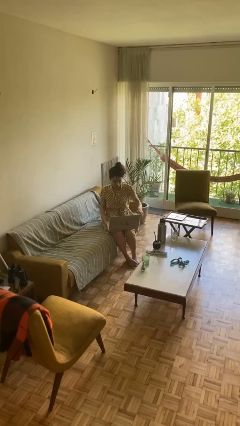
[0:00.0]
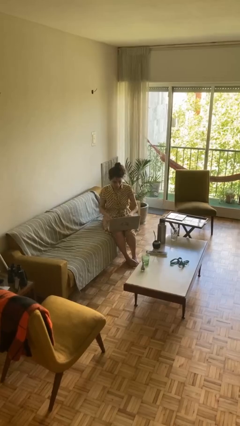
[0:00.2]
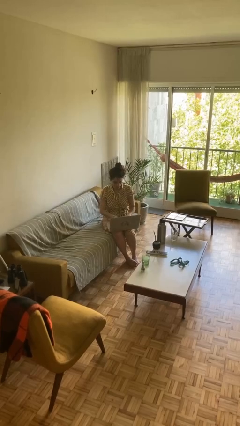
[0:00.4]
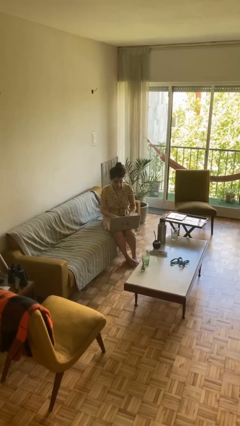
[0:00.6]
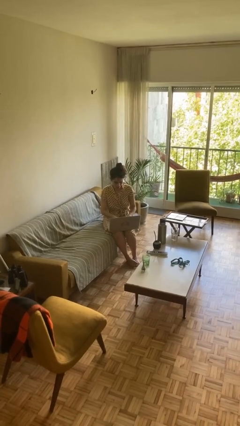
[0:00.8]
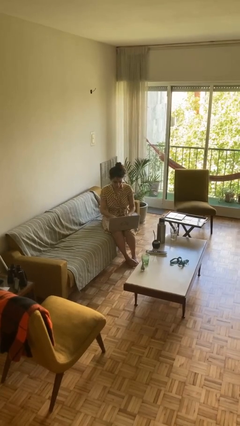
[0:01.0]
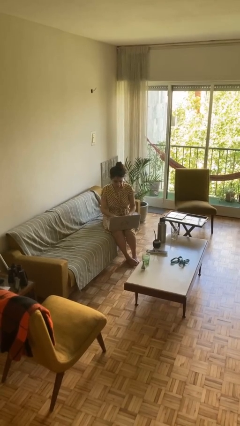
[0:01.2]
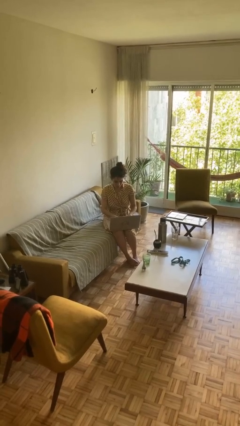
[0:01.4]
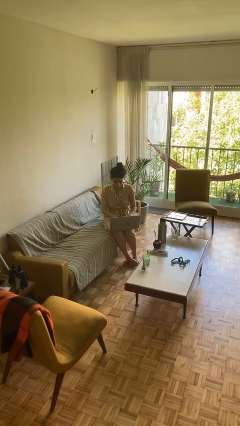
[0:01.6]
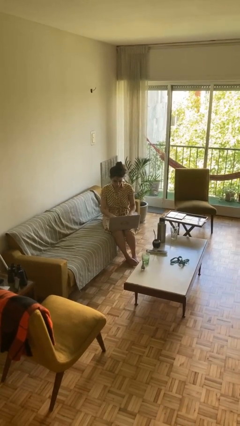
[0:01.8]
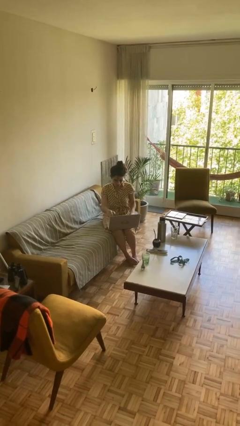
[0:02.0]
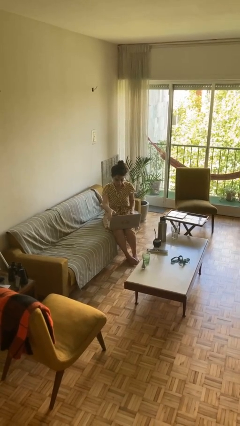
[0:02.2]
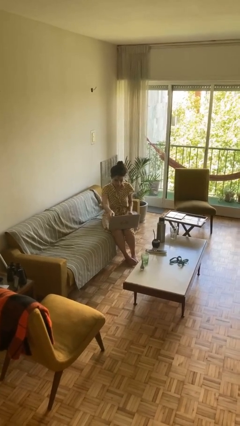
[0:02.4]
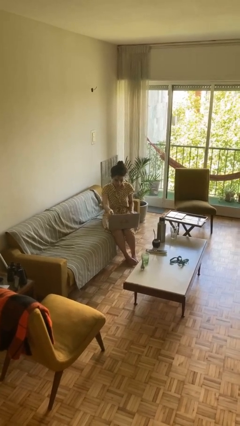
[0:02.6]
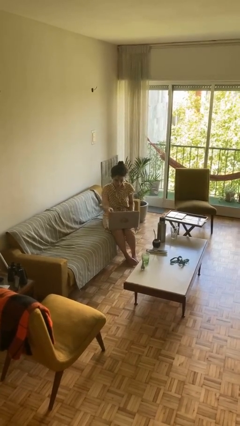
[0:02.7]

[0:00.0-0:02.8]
person interacts with laptop

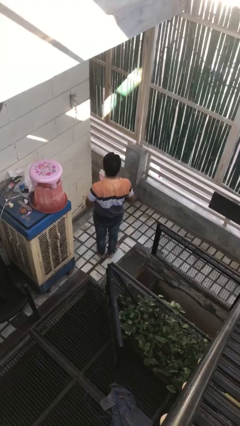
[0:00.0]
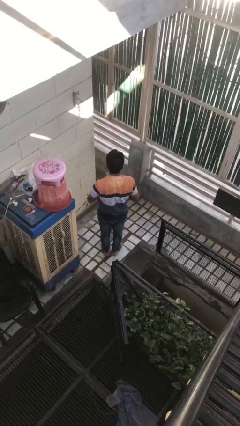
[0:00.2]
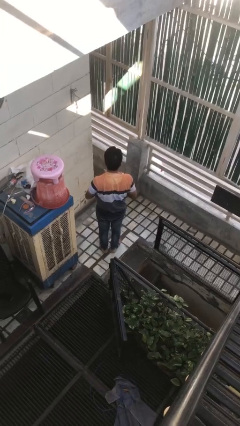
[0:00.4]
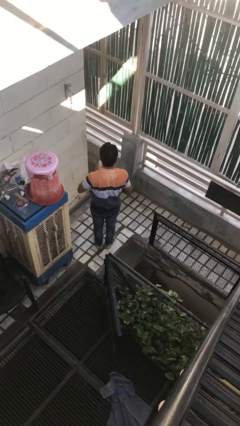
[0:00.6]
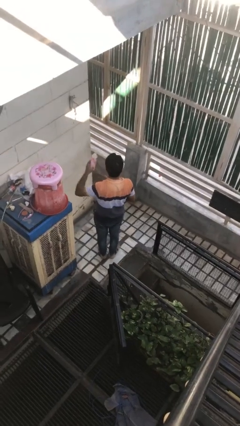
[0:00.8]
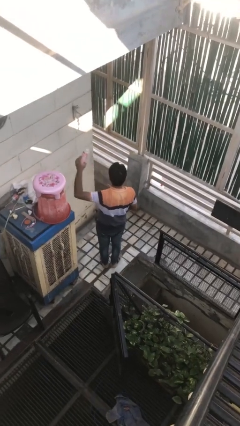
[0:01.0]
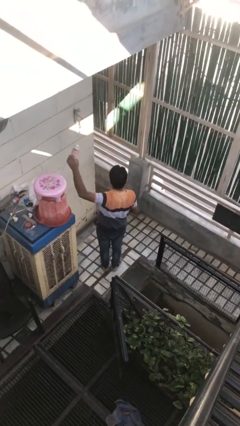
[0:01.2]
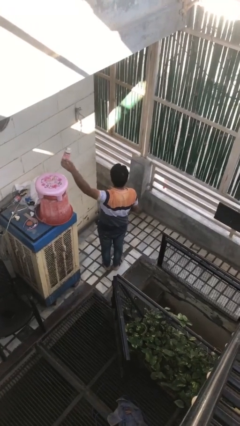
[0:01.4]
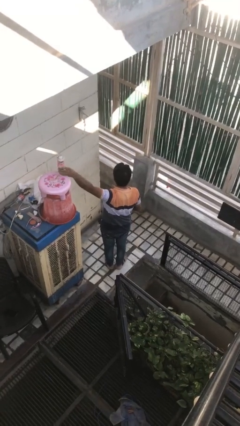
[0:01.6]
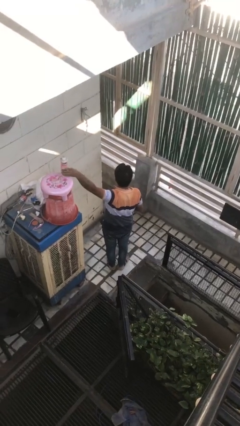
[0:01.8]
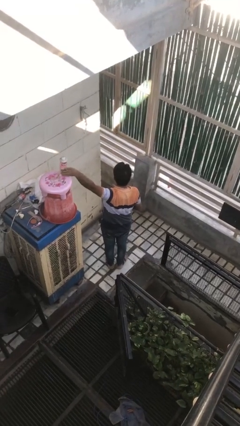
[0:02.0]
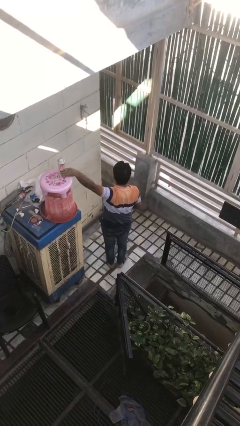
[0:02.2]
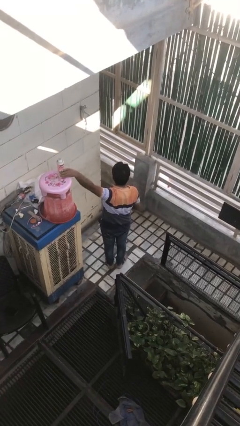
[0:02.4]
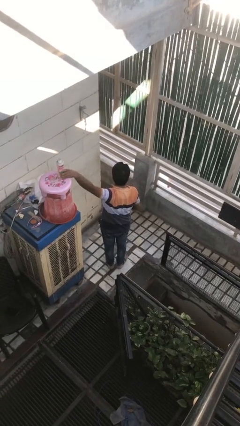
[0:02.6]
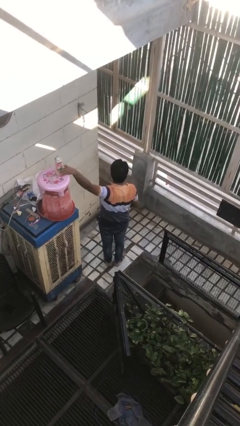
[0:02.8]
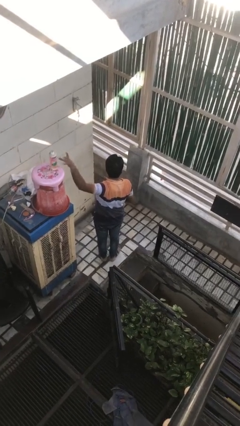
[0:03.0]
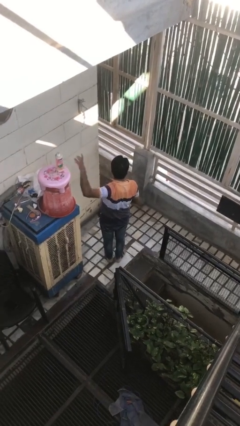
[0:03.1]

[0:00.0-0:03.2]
person puts down object on countertop

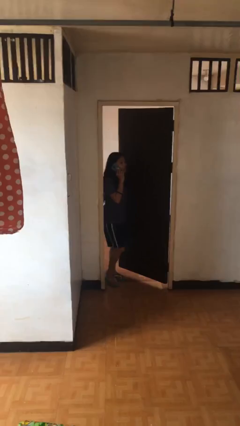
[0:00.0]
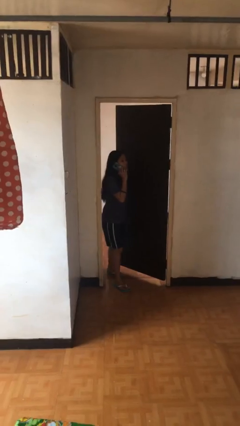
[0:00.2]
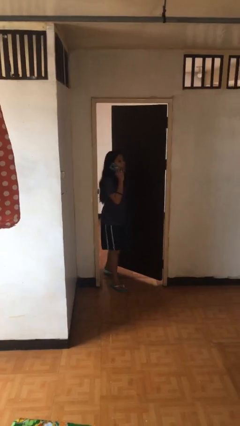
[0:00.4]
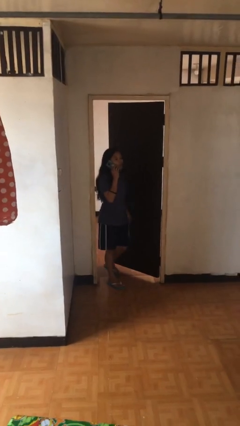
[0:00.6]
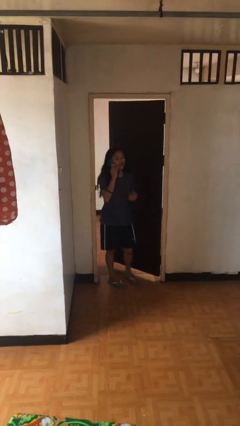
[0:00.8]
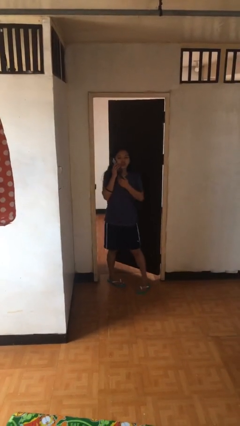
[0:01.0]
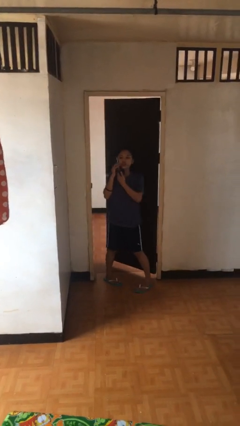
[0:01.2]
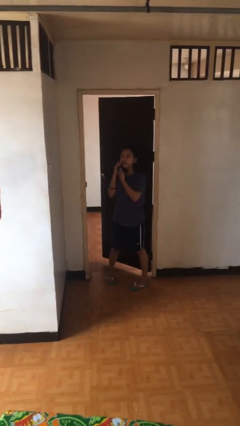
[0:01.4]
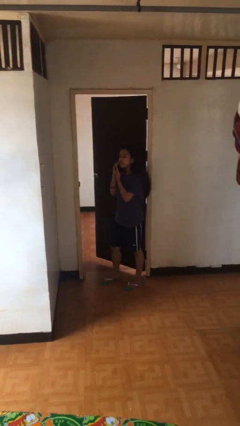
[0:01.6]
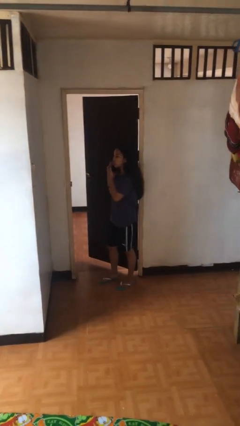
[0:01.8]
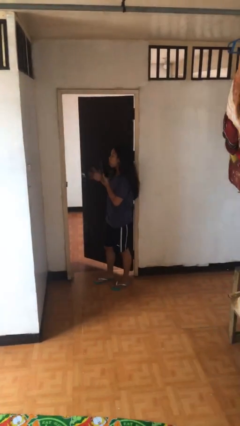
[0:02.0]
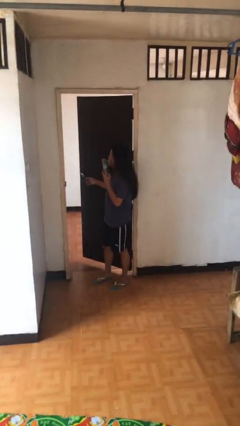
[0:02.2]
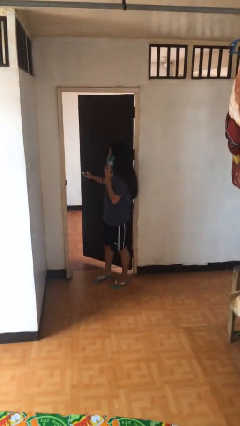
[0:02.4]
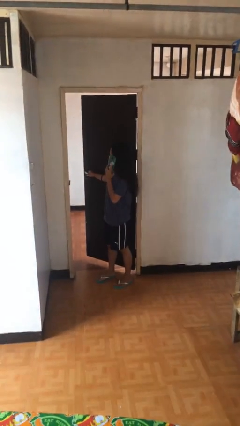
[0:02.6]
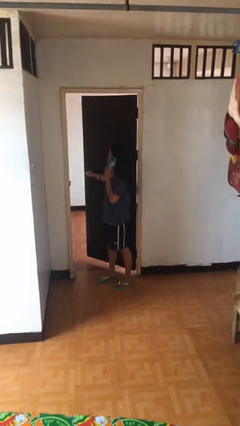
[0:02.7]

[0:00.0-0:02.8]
person enters scene through structure

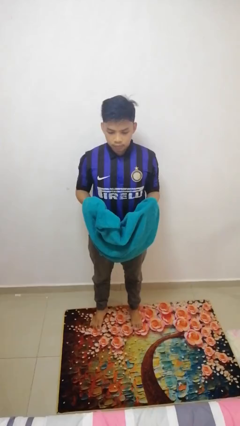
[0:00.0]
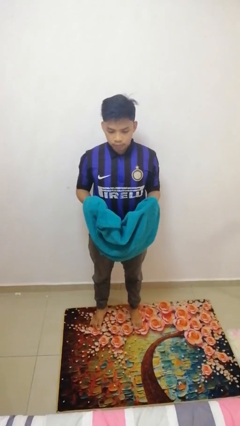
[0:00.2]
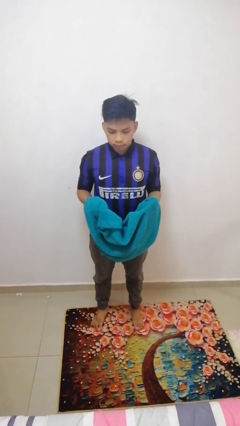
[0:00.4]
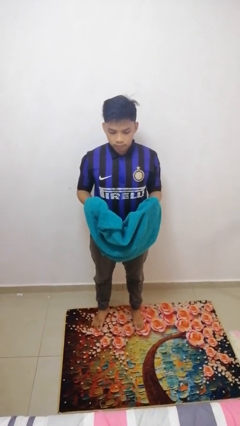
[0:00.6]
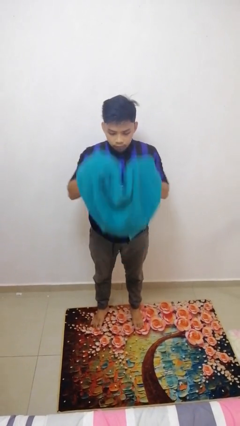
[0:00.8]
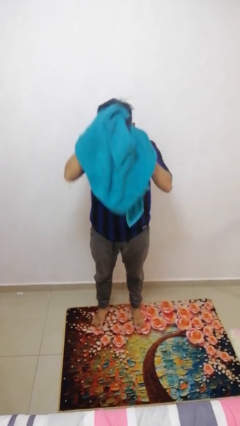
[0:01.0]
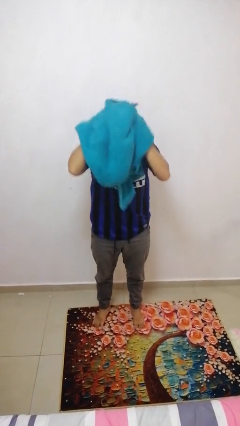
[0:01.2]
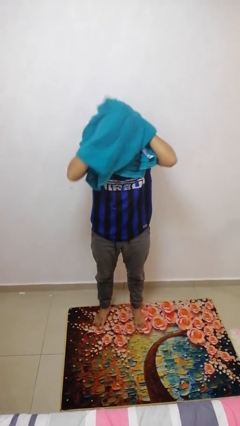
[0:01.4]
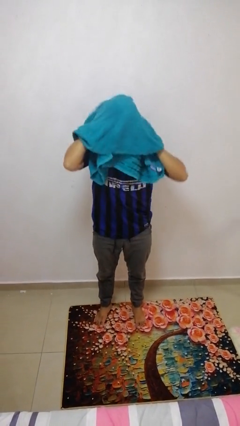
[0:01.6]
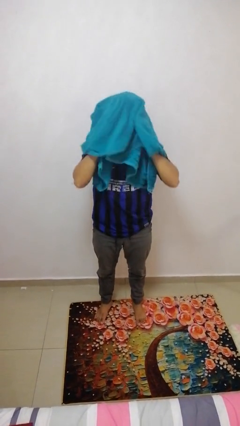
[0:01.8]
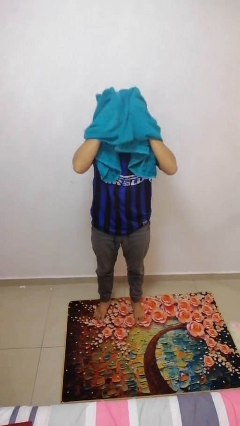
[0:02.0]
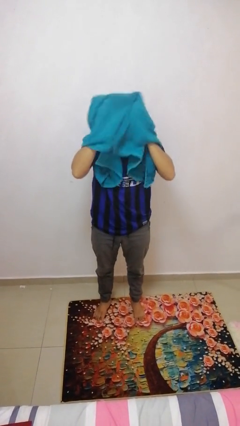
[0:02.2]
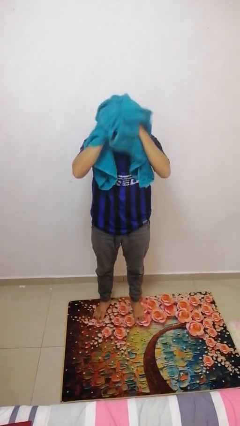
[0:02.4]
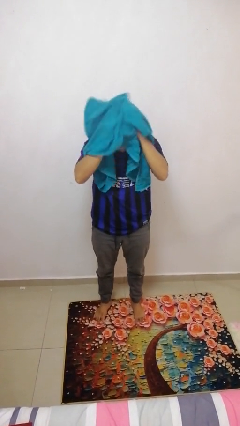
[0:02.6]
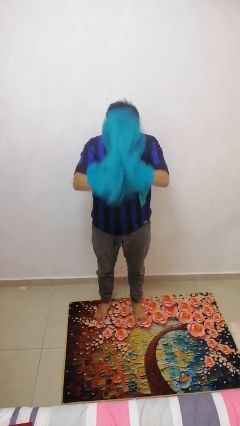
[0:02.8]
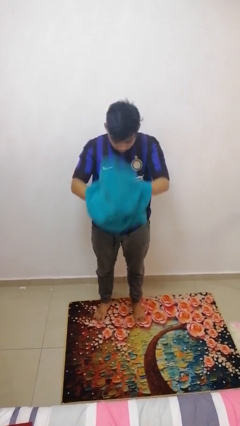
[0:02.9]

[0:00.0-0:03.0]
person dries hair with towel

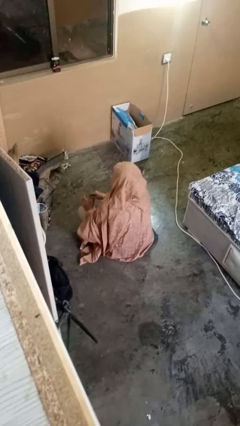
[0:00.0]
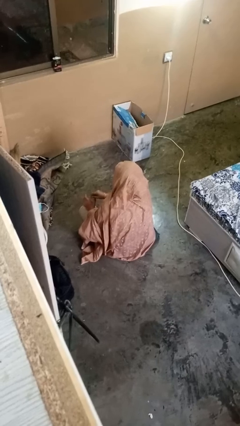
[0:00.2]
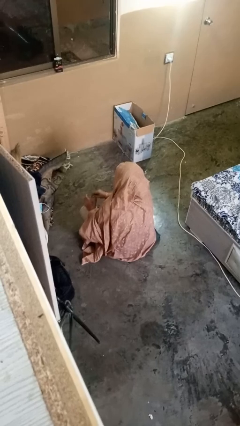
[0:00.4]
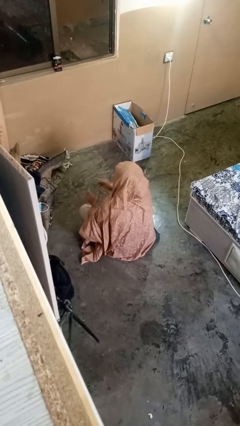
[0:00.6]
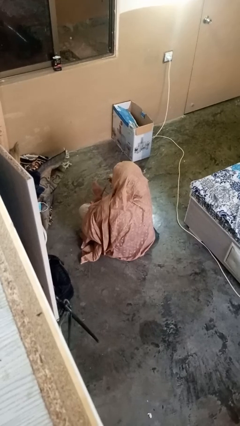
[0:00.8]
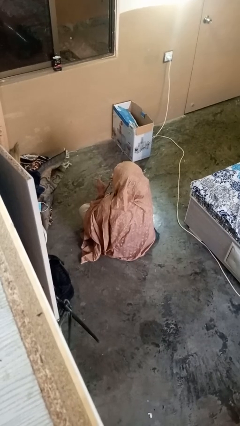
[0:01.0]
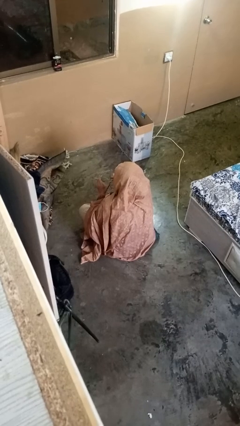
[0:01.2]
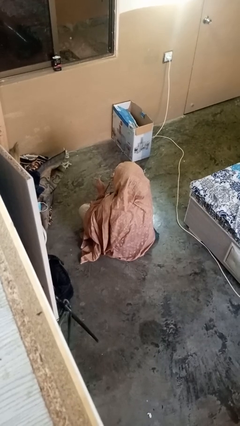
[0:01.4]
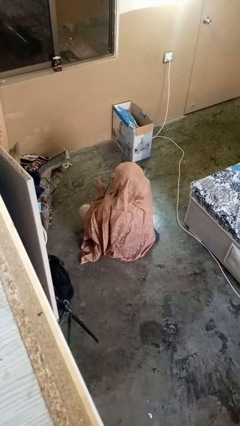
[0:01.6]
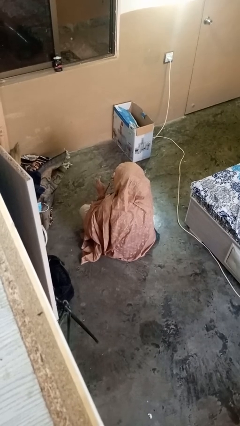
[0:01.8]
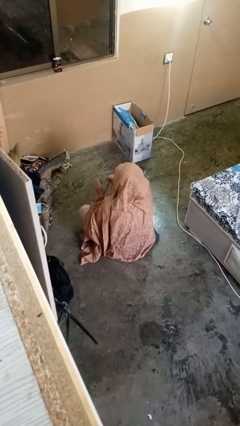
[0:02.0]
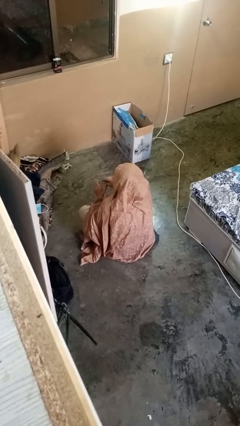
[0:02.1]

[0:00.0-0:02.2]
person drinks from straw

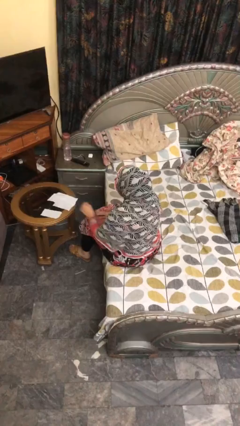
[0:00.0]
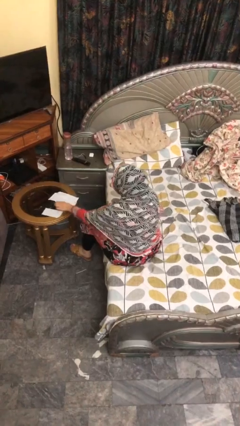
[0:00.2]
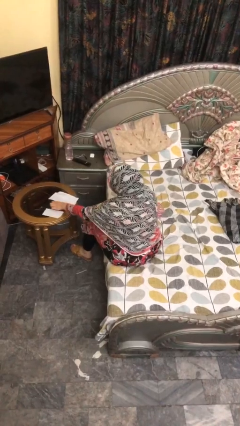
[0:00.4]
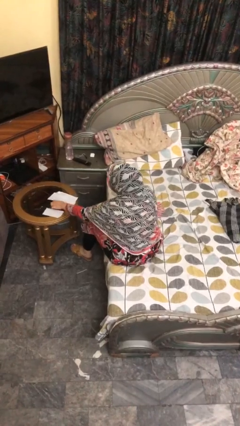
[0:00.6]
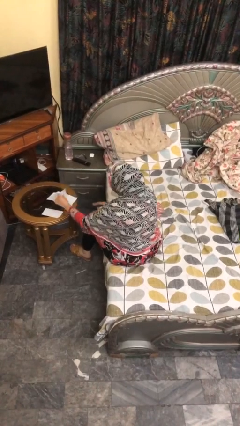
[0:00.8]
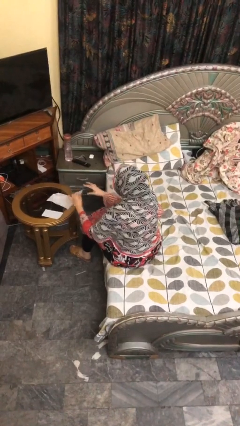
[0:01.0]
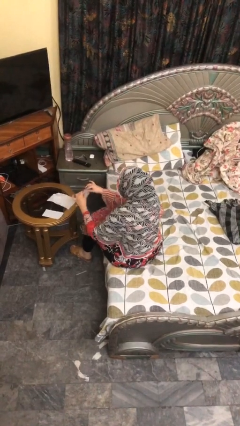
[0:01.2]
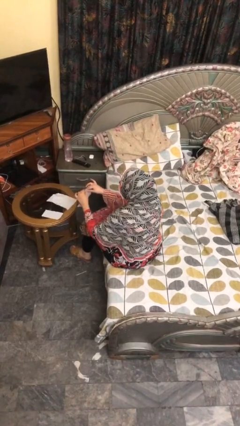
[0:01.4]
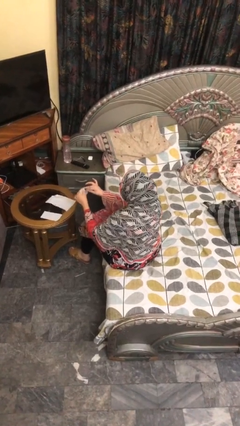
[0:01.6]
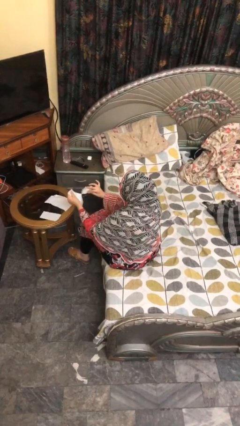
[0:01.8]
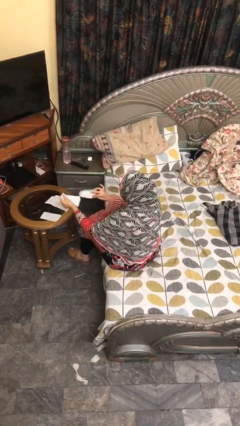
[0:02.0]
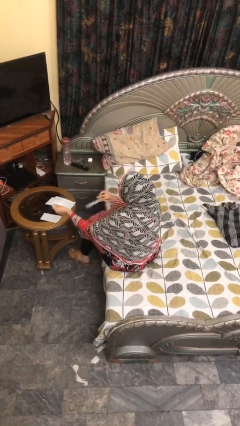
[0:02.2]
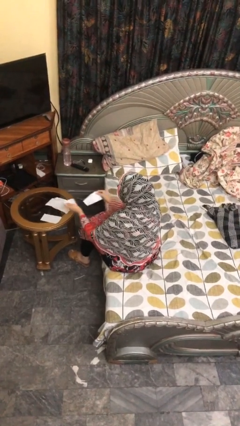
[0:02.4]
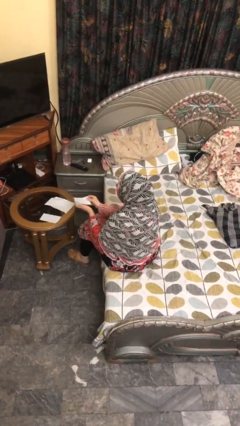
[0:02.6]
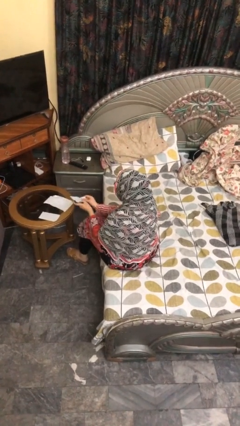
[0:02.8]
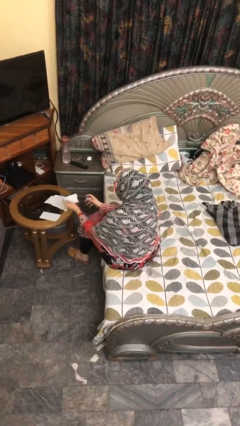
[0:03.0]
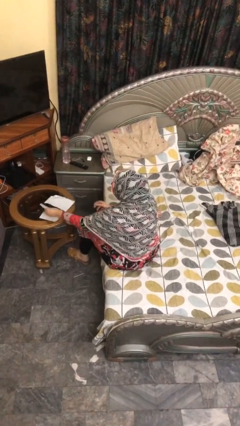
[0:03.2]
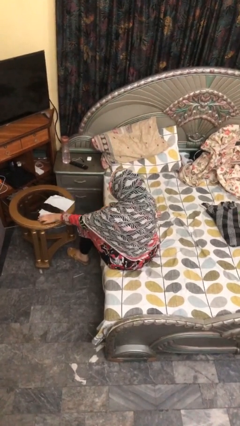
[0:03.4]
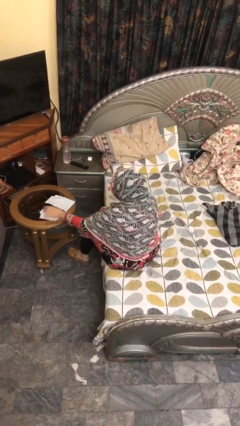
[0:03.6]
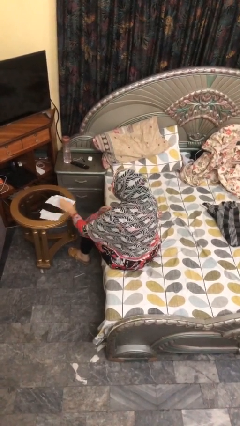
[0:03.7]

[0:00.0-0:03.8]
person tears paper
